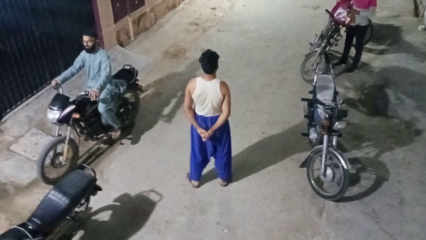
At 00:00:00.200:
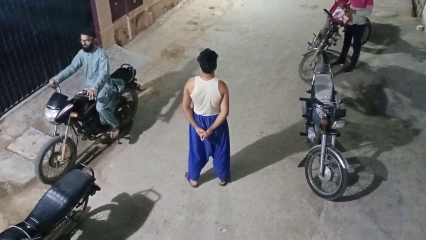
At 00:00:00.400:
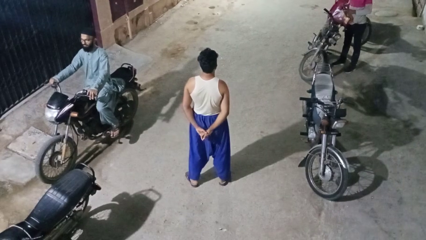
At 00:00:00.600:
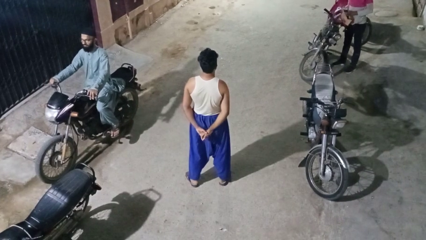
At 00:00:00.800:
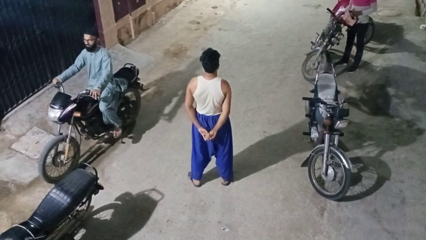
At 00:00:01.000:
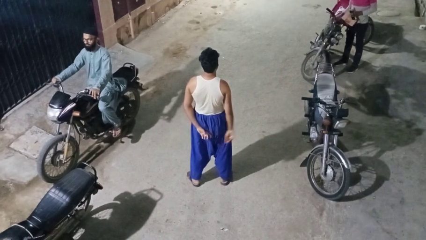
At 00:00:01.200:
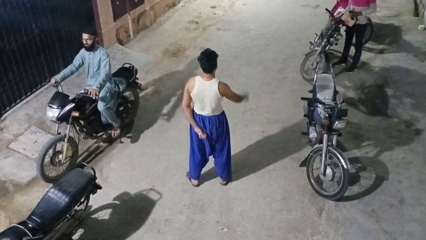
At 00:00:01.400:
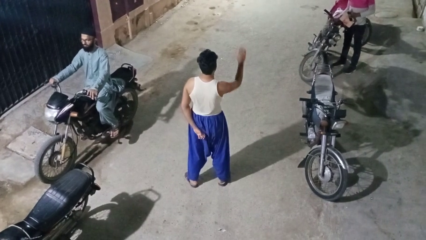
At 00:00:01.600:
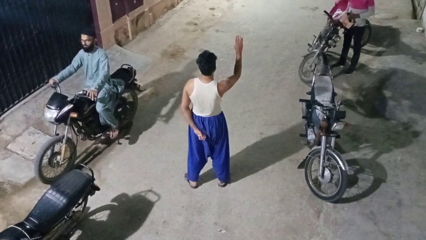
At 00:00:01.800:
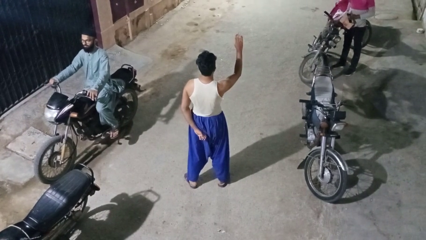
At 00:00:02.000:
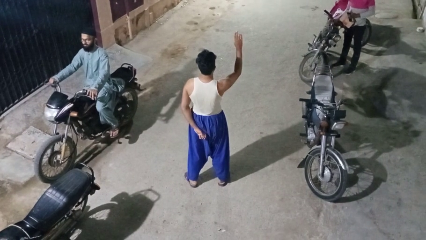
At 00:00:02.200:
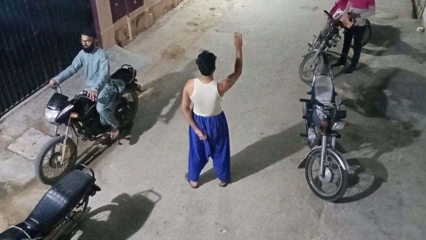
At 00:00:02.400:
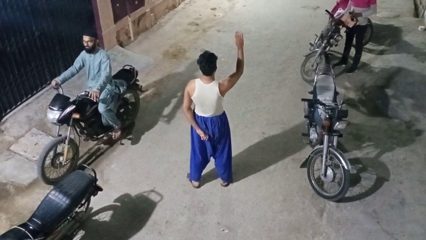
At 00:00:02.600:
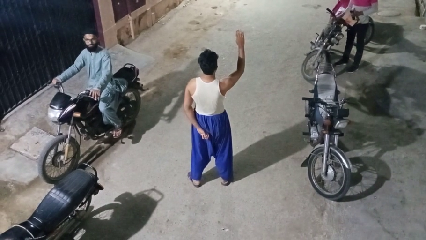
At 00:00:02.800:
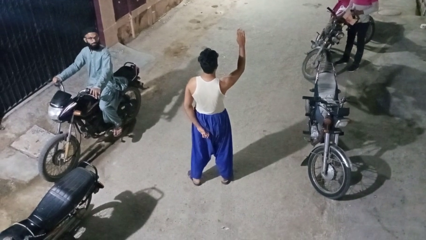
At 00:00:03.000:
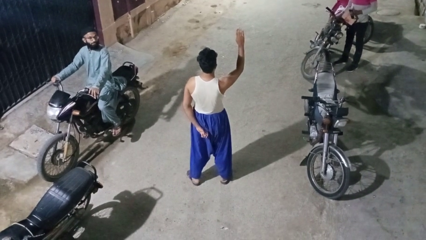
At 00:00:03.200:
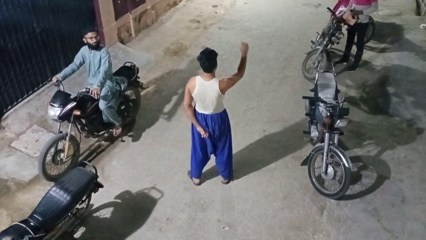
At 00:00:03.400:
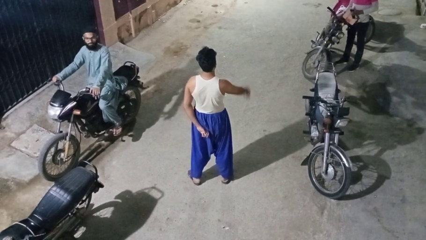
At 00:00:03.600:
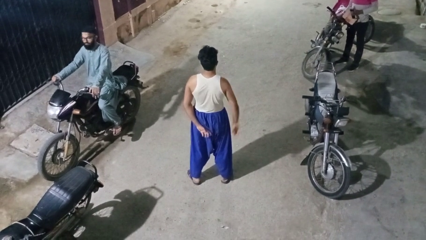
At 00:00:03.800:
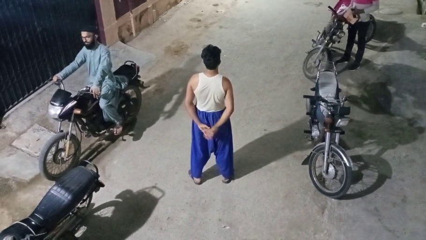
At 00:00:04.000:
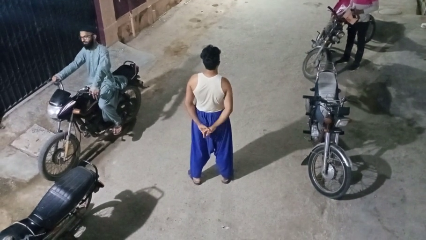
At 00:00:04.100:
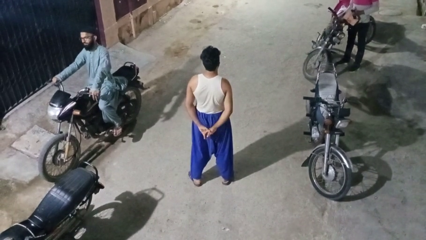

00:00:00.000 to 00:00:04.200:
person points at person

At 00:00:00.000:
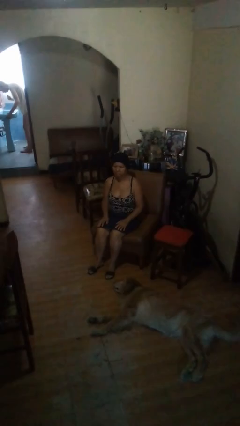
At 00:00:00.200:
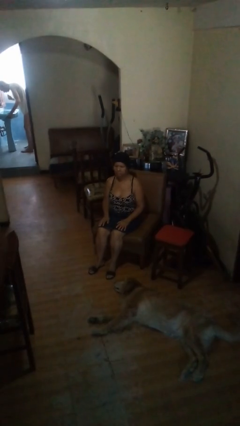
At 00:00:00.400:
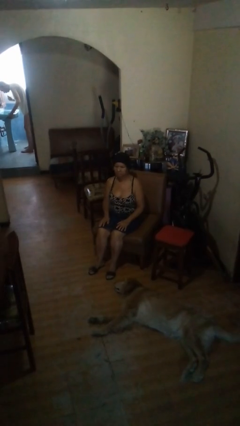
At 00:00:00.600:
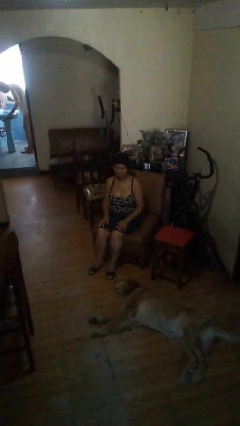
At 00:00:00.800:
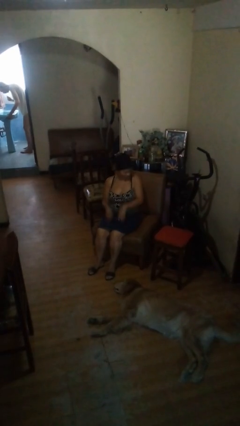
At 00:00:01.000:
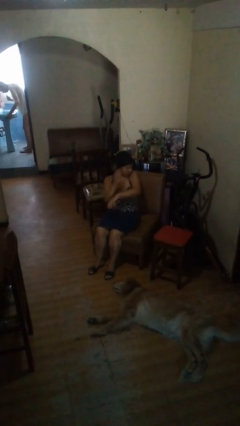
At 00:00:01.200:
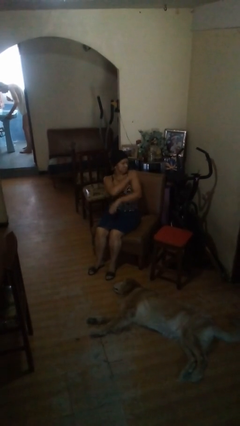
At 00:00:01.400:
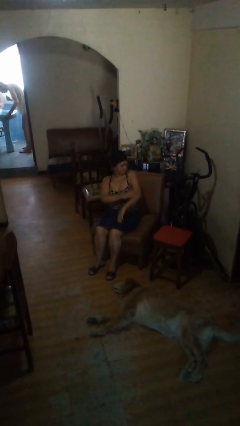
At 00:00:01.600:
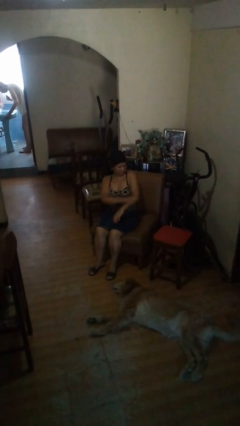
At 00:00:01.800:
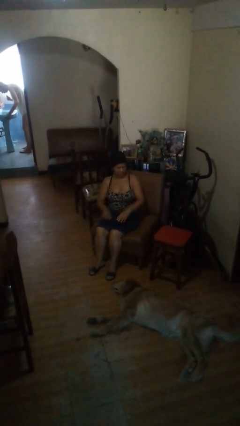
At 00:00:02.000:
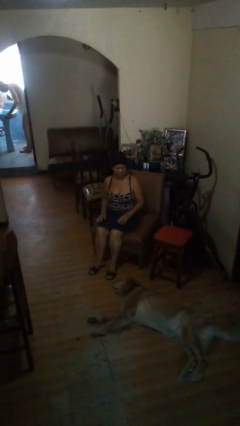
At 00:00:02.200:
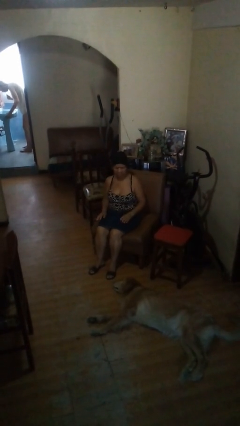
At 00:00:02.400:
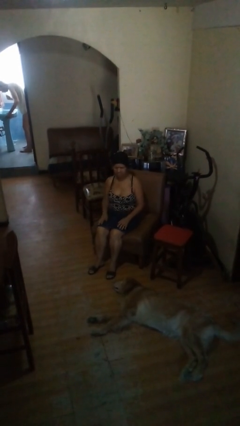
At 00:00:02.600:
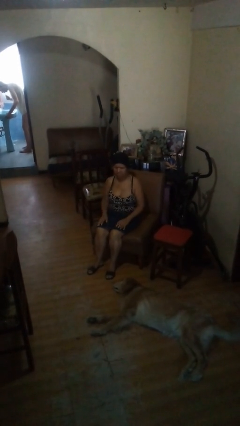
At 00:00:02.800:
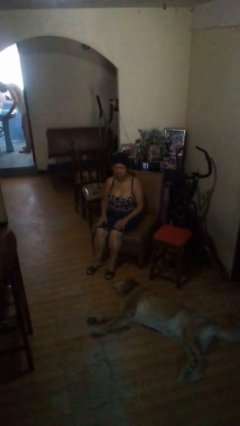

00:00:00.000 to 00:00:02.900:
person swats bug

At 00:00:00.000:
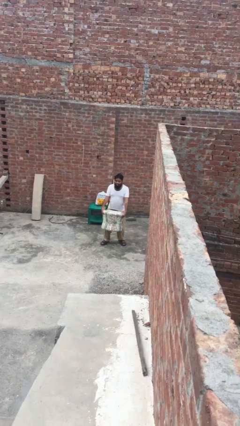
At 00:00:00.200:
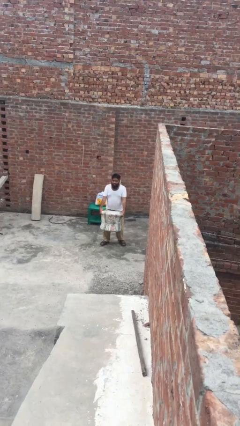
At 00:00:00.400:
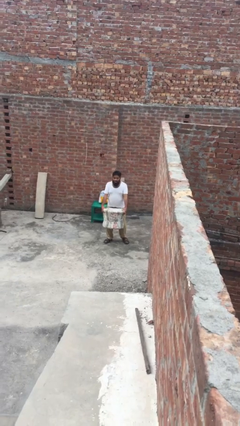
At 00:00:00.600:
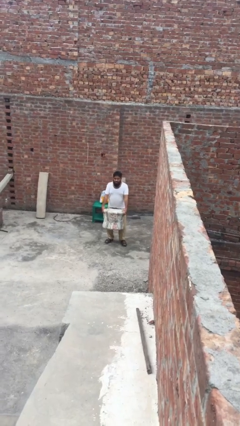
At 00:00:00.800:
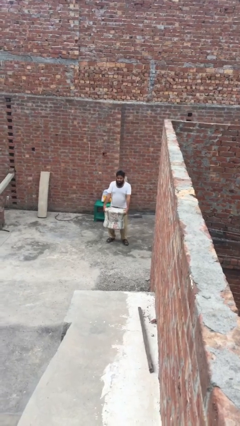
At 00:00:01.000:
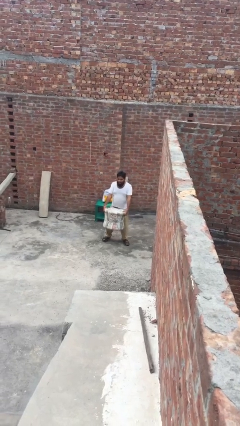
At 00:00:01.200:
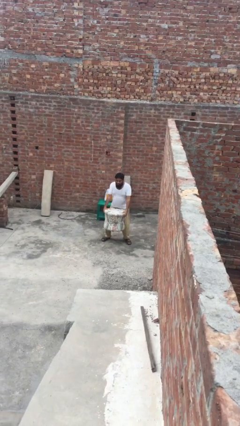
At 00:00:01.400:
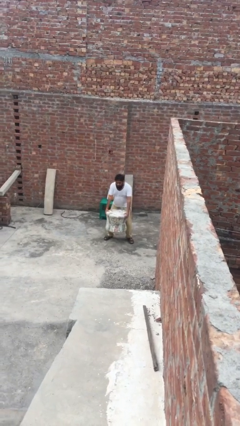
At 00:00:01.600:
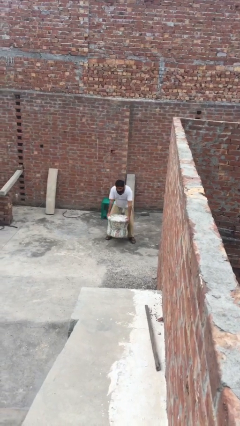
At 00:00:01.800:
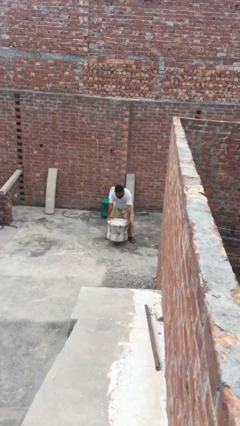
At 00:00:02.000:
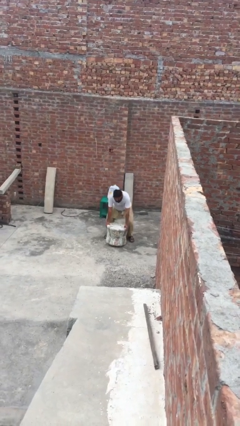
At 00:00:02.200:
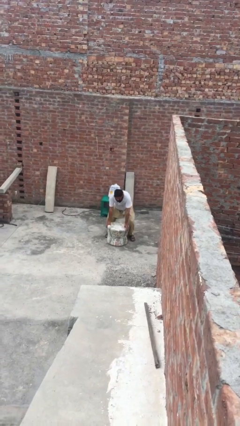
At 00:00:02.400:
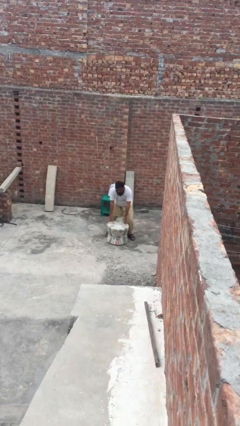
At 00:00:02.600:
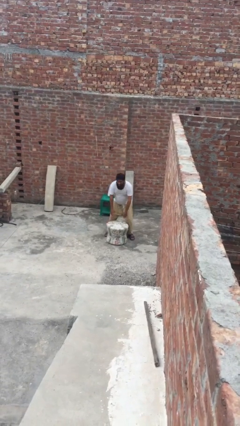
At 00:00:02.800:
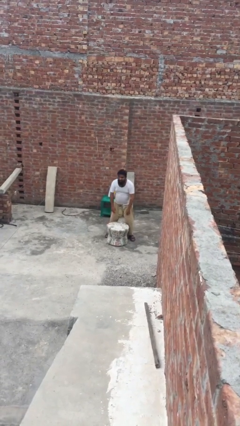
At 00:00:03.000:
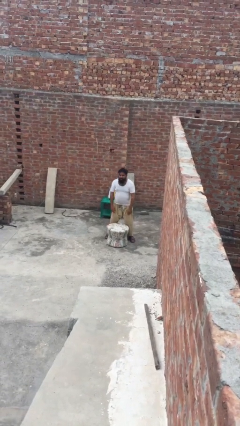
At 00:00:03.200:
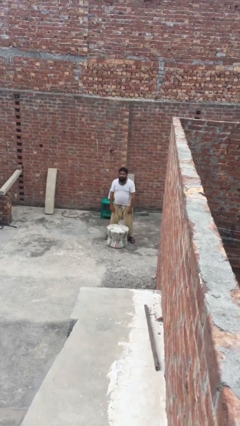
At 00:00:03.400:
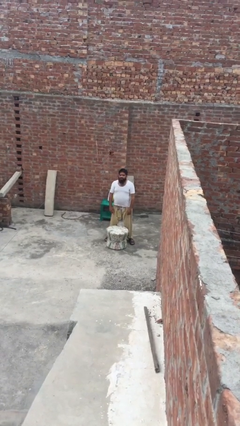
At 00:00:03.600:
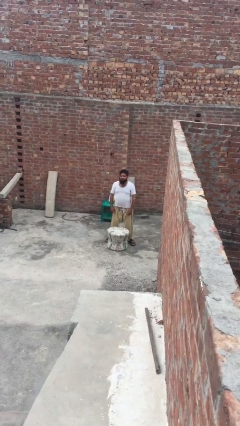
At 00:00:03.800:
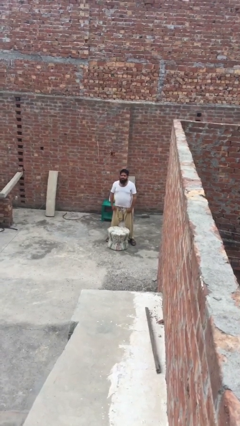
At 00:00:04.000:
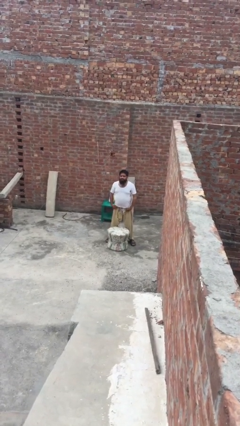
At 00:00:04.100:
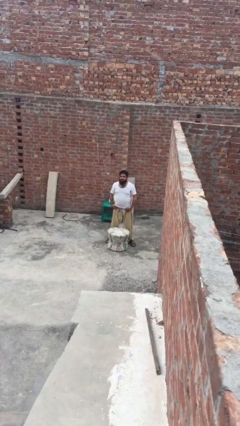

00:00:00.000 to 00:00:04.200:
person puts down object on floor

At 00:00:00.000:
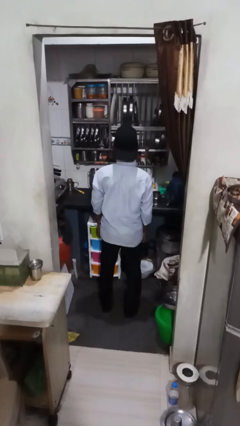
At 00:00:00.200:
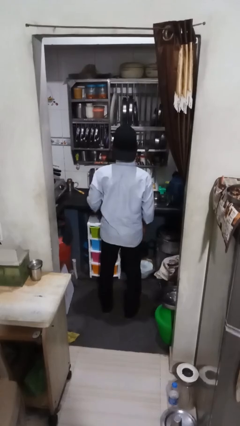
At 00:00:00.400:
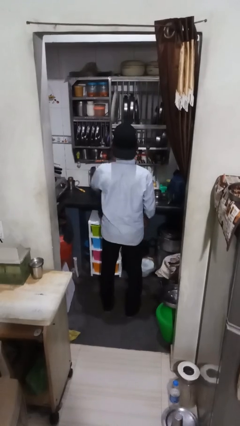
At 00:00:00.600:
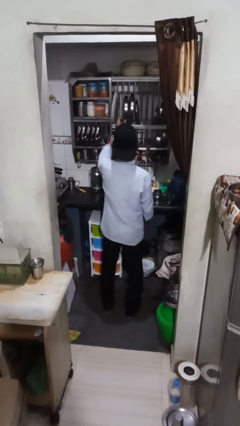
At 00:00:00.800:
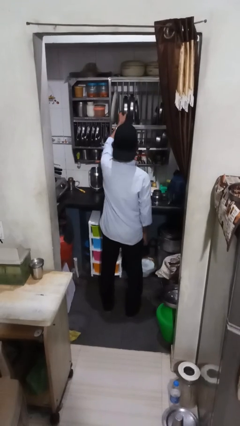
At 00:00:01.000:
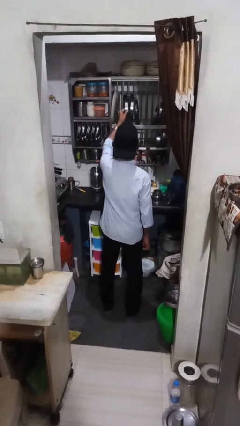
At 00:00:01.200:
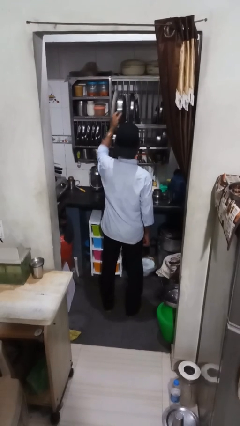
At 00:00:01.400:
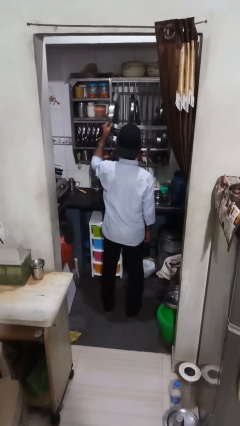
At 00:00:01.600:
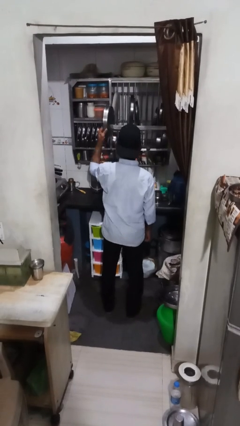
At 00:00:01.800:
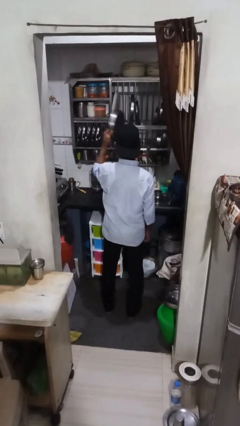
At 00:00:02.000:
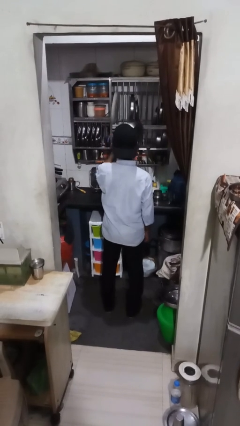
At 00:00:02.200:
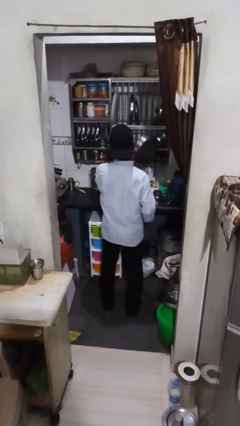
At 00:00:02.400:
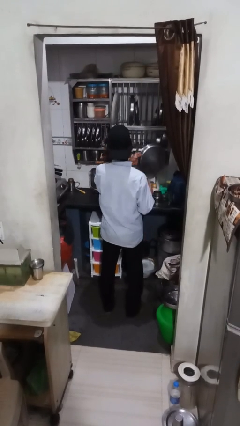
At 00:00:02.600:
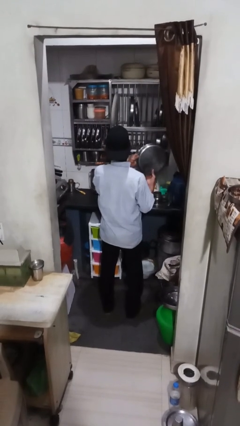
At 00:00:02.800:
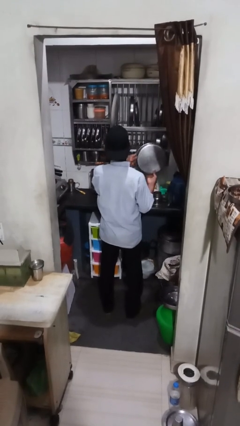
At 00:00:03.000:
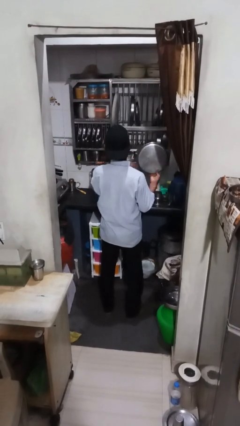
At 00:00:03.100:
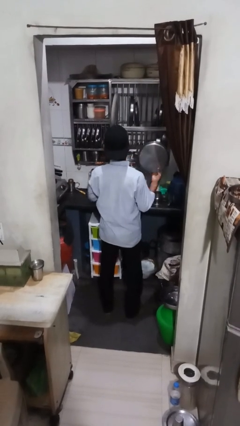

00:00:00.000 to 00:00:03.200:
person takes object from cabinet

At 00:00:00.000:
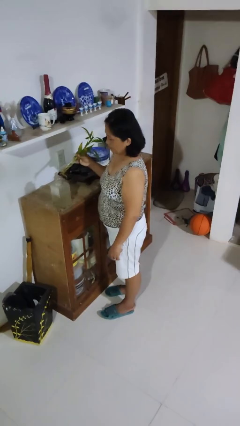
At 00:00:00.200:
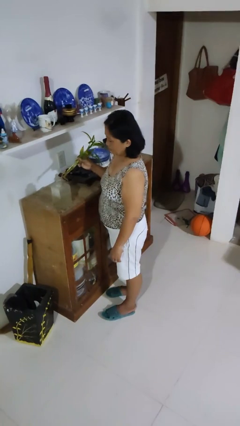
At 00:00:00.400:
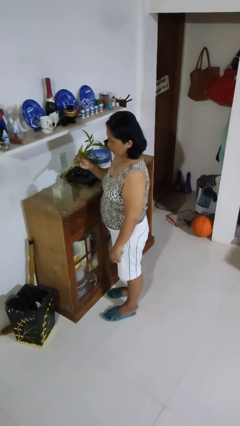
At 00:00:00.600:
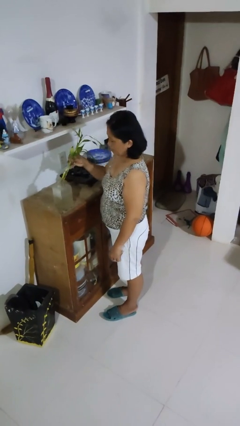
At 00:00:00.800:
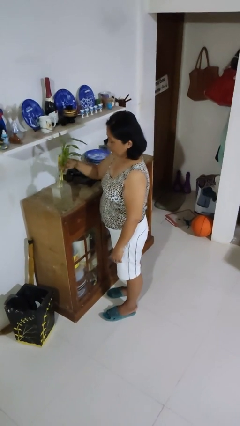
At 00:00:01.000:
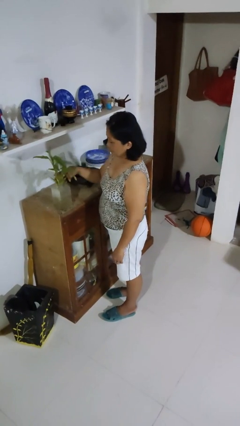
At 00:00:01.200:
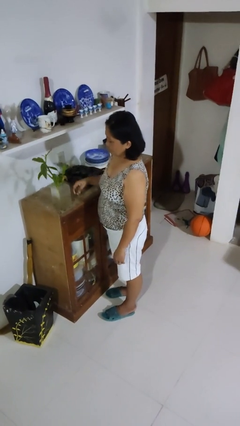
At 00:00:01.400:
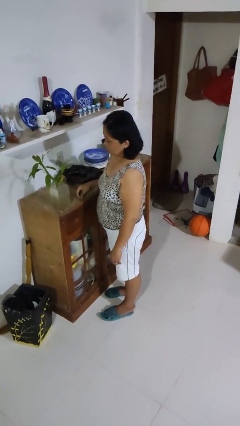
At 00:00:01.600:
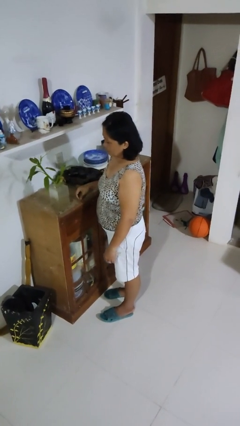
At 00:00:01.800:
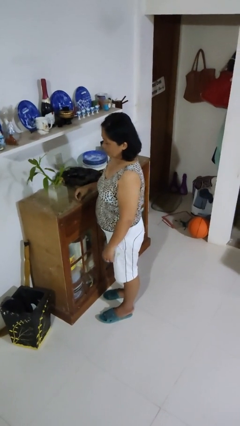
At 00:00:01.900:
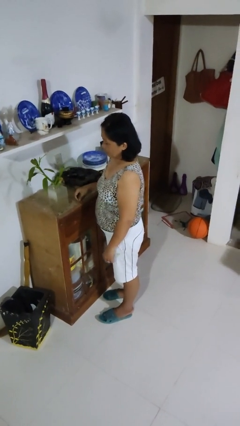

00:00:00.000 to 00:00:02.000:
person arranges flowers in vase

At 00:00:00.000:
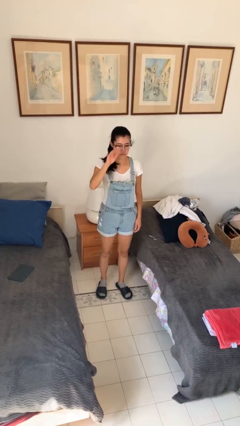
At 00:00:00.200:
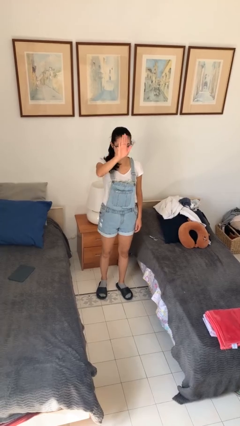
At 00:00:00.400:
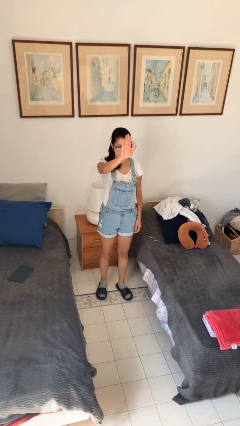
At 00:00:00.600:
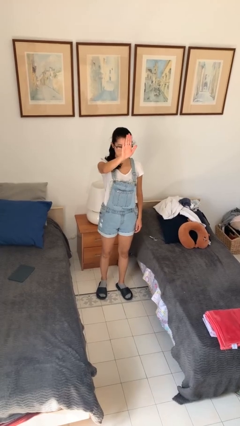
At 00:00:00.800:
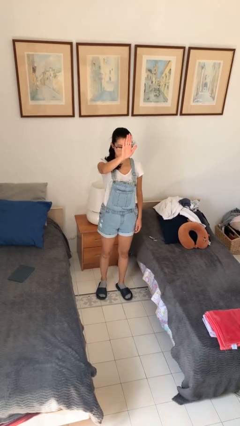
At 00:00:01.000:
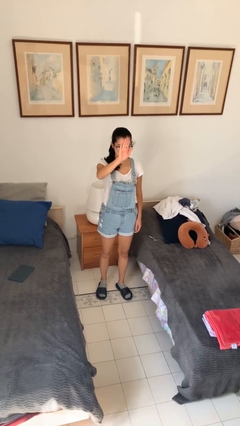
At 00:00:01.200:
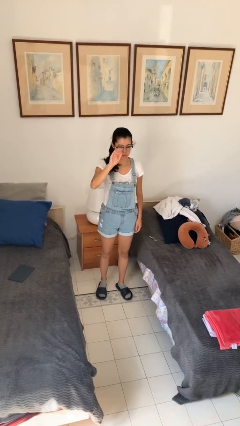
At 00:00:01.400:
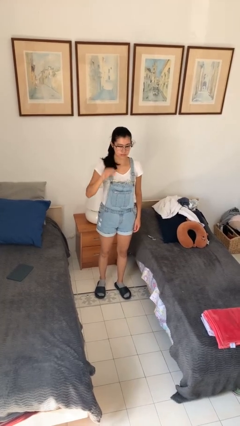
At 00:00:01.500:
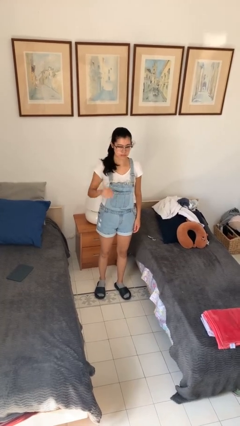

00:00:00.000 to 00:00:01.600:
person gestures stop
